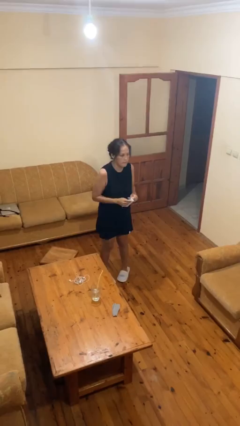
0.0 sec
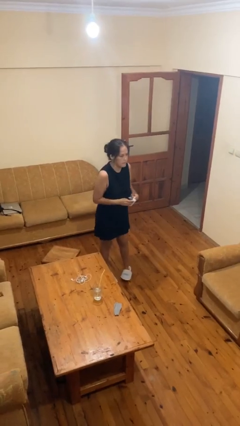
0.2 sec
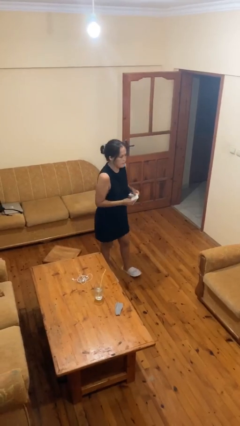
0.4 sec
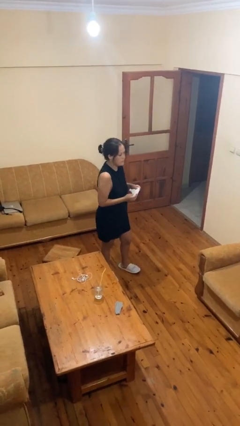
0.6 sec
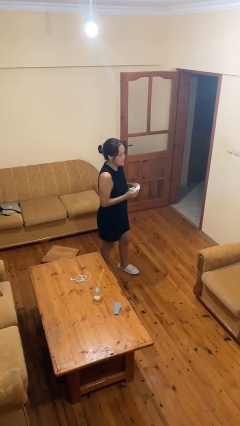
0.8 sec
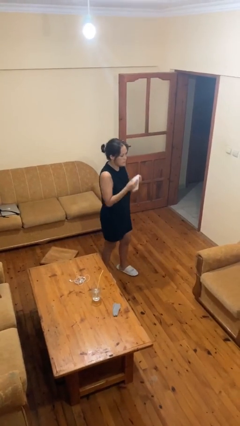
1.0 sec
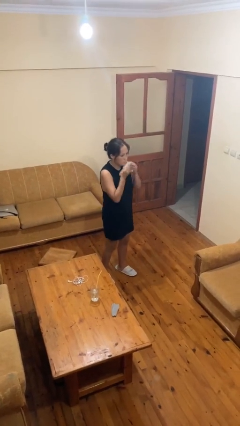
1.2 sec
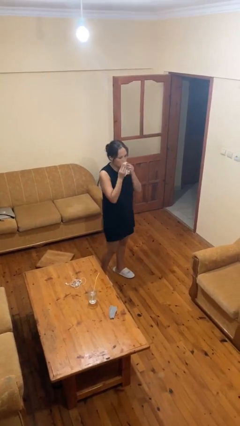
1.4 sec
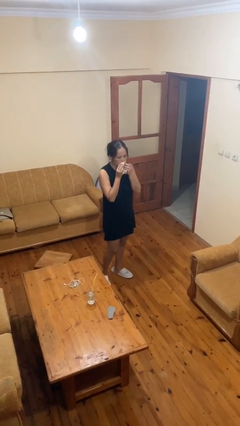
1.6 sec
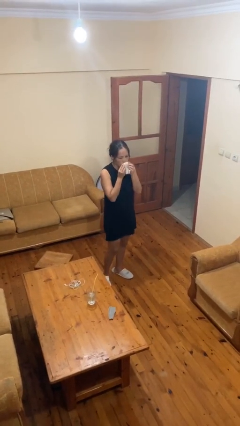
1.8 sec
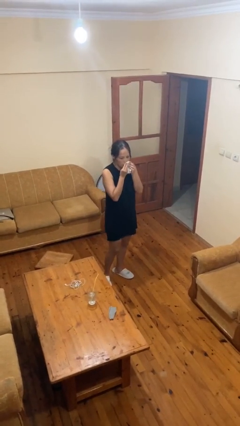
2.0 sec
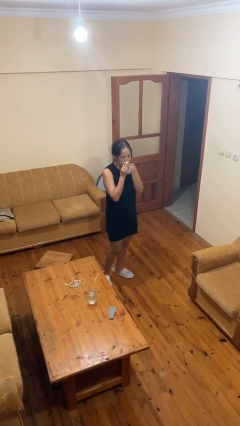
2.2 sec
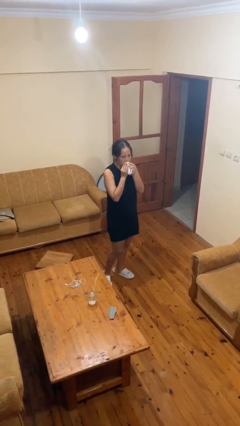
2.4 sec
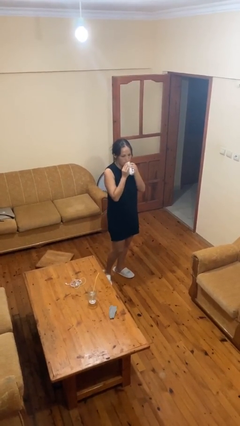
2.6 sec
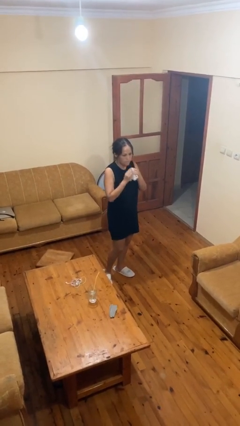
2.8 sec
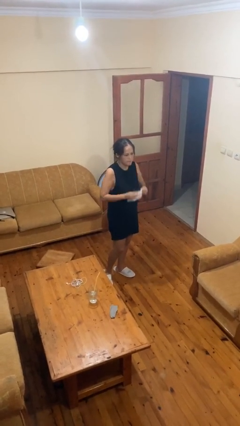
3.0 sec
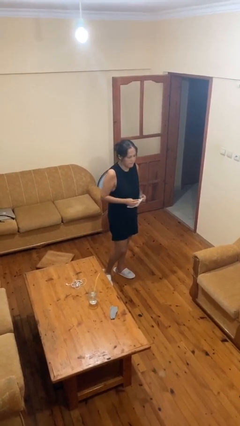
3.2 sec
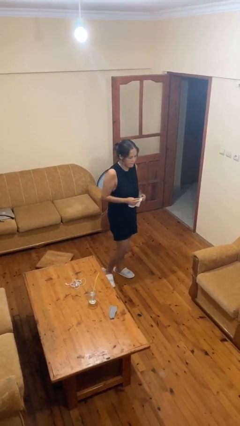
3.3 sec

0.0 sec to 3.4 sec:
person wipes mouth with napkin

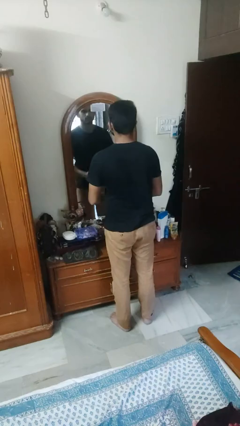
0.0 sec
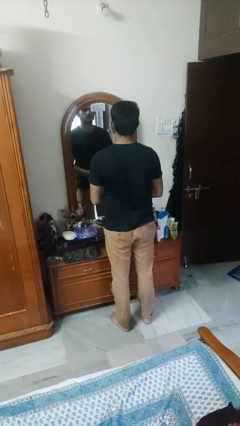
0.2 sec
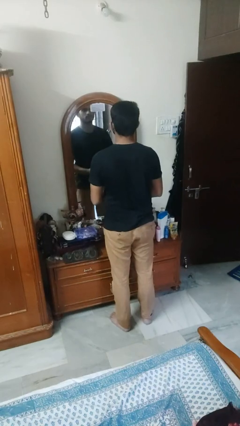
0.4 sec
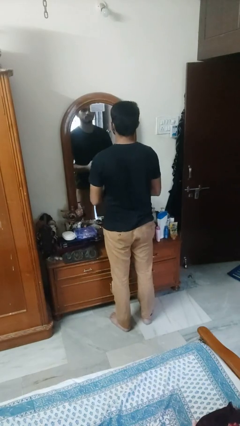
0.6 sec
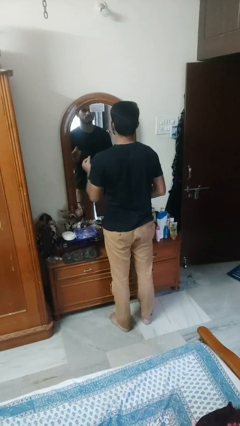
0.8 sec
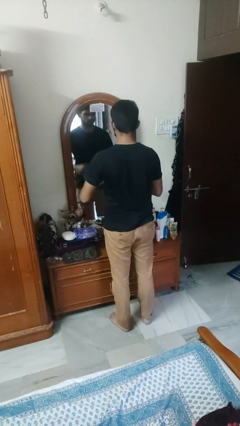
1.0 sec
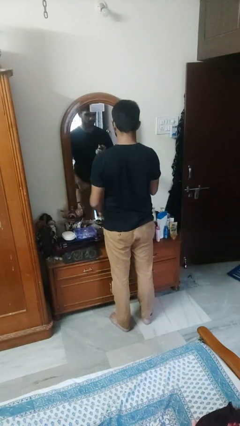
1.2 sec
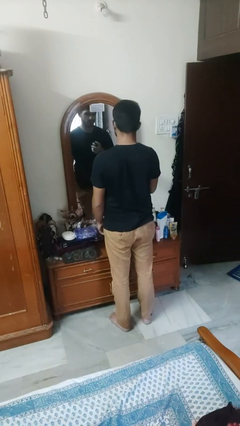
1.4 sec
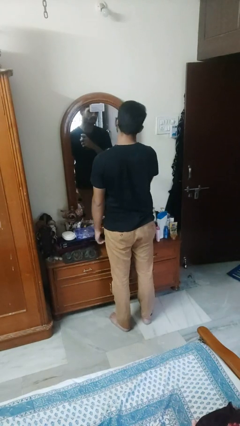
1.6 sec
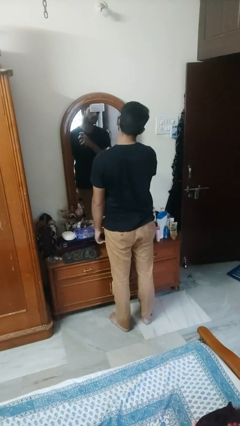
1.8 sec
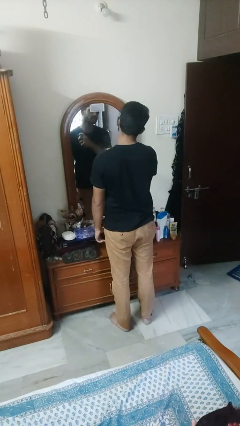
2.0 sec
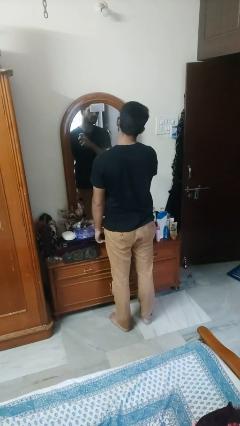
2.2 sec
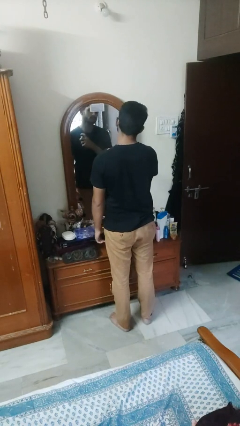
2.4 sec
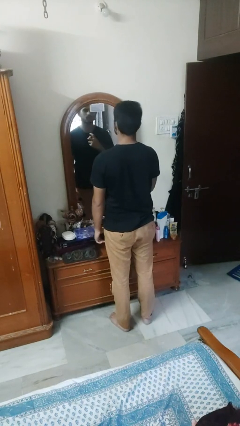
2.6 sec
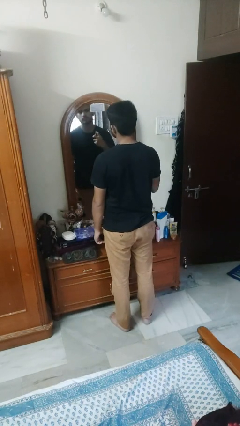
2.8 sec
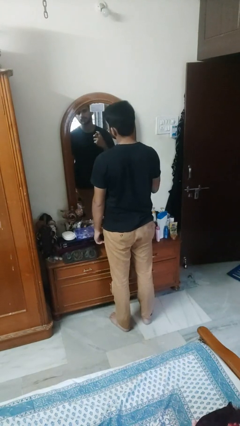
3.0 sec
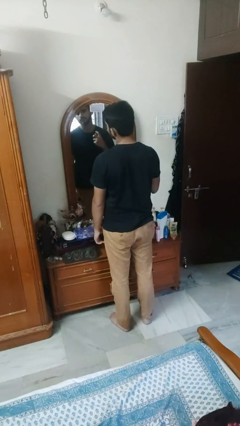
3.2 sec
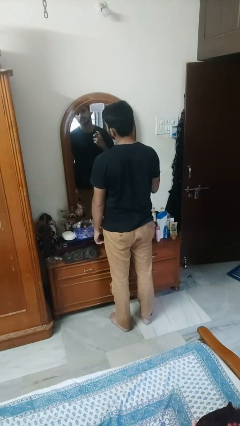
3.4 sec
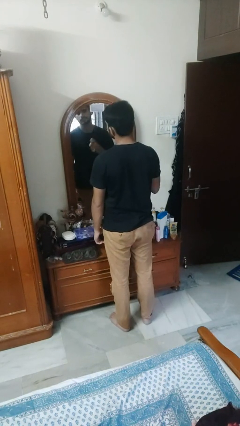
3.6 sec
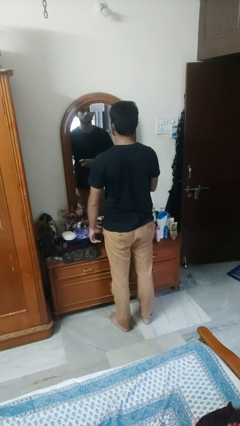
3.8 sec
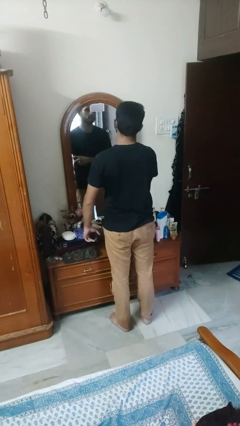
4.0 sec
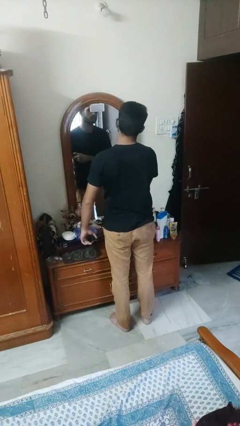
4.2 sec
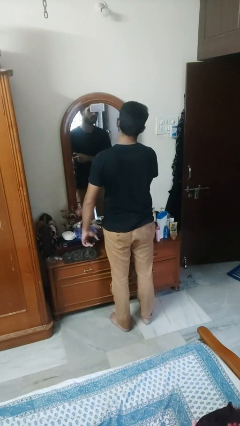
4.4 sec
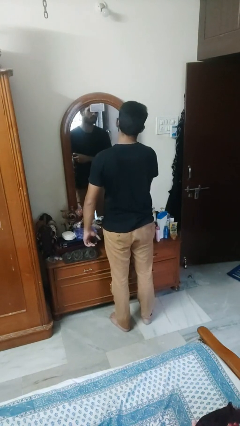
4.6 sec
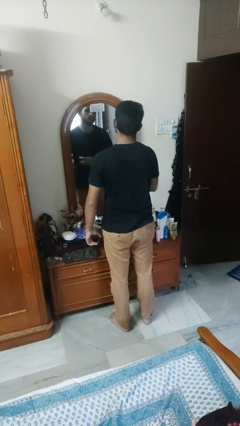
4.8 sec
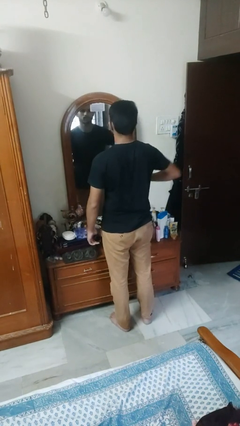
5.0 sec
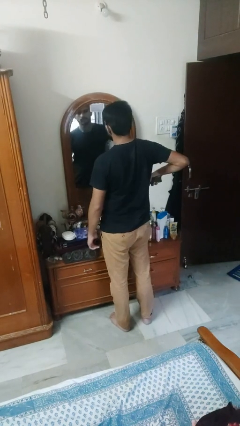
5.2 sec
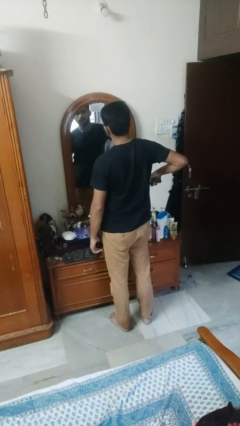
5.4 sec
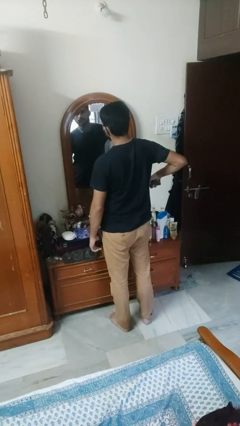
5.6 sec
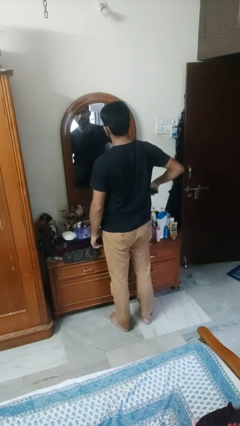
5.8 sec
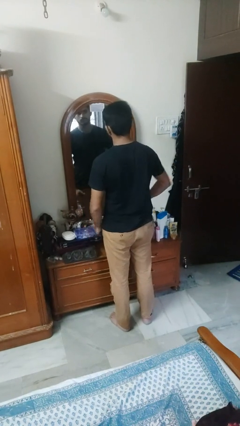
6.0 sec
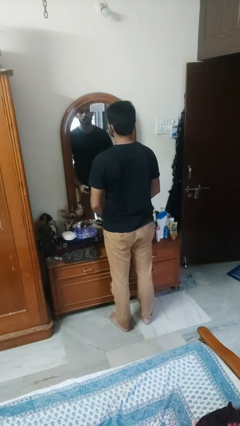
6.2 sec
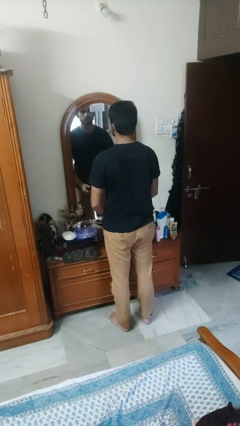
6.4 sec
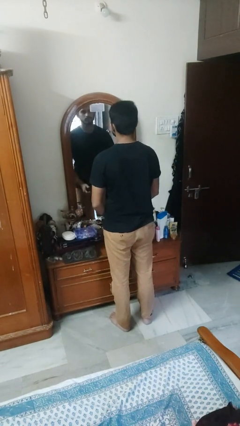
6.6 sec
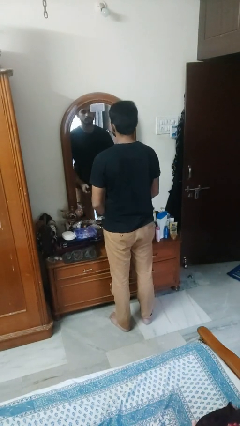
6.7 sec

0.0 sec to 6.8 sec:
person applies deodorant

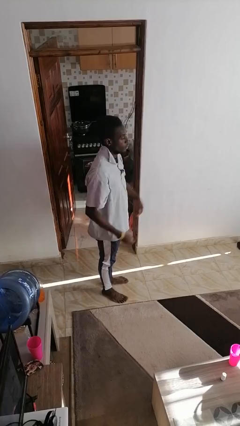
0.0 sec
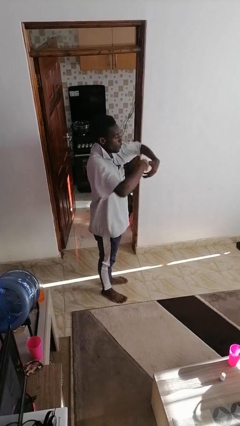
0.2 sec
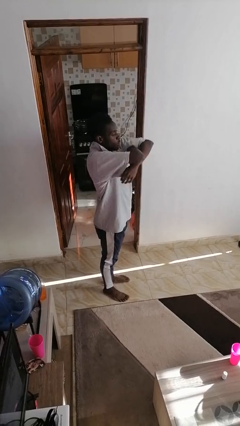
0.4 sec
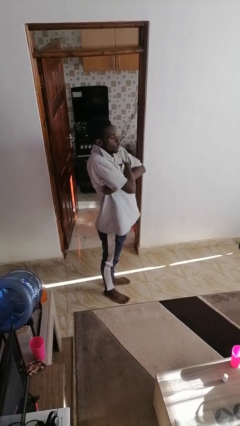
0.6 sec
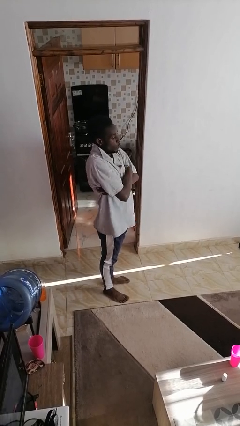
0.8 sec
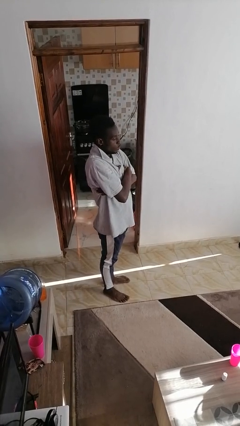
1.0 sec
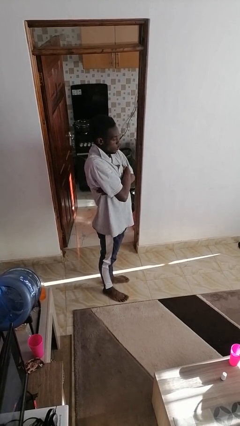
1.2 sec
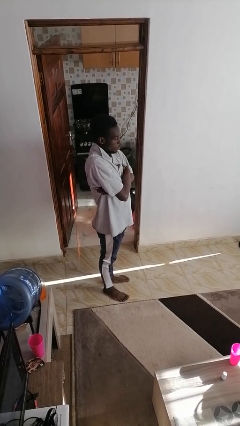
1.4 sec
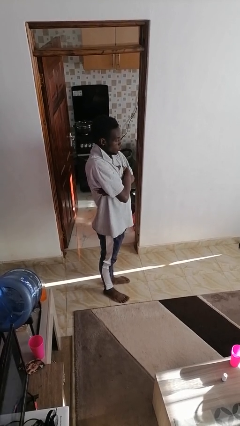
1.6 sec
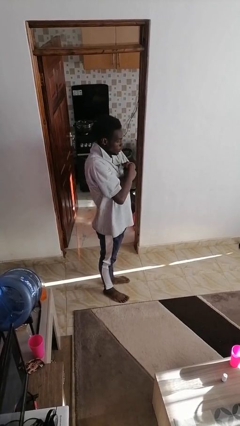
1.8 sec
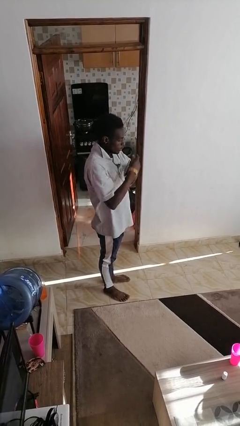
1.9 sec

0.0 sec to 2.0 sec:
person crosses arms

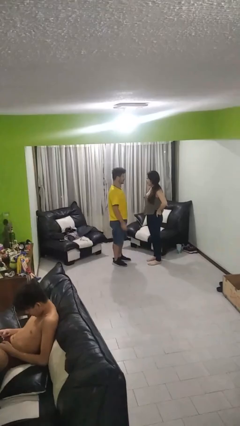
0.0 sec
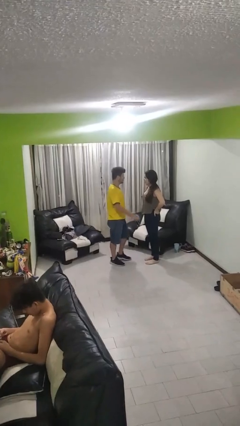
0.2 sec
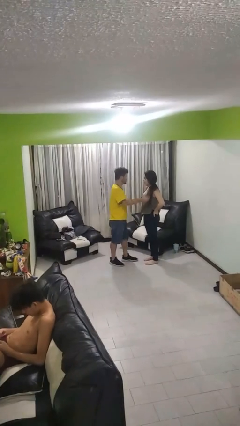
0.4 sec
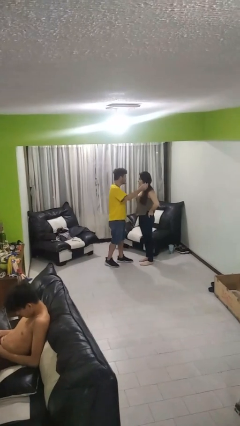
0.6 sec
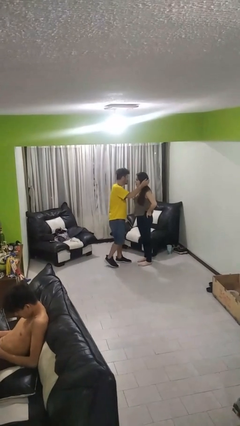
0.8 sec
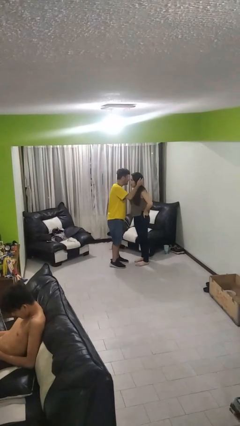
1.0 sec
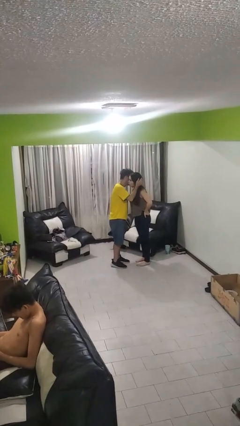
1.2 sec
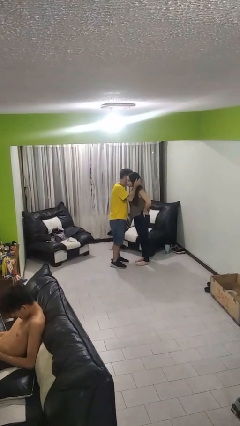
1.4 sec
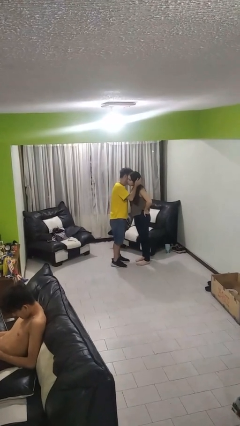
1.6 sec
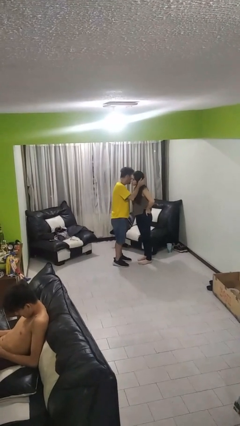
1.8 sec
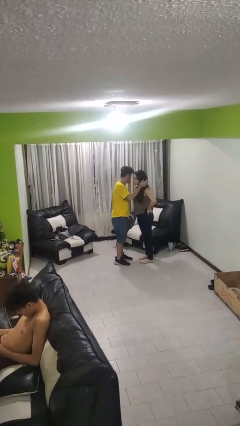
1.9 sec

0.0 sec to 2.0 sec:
person kisses cheek of person

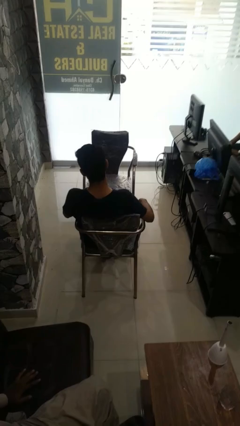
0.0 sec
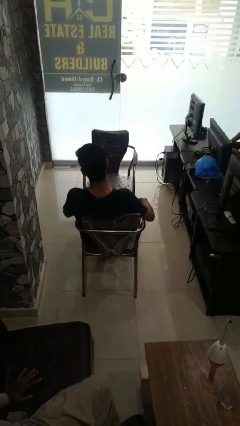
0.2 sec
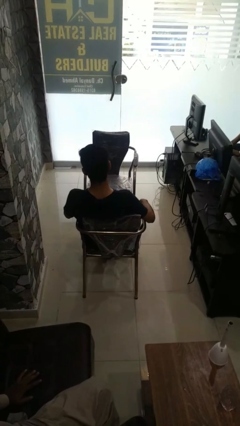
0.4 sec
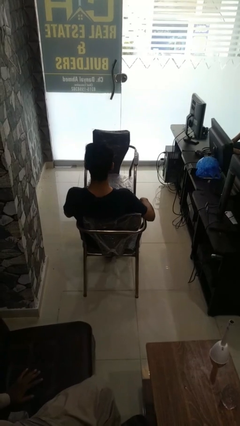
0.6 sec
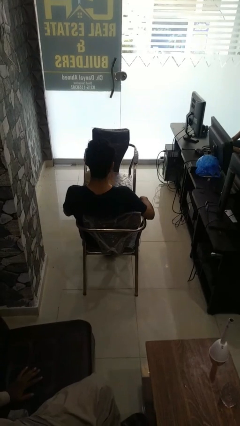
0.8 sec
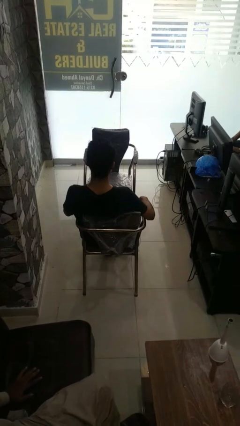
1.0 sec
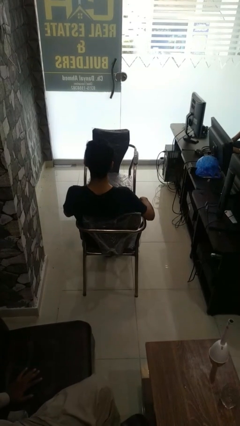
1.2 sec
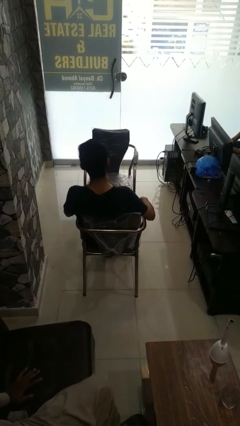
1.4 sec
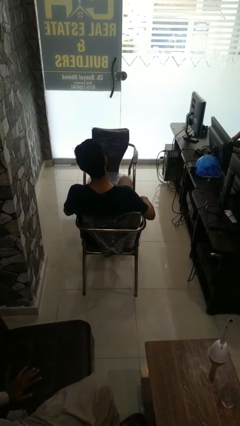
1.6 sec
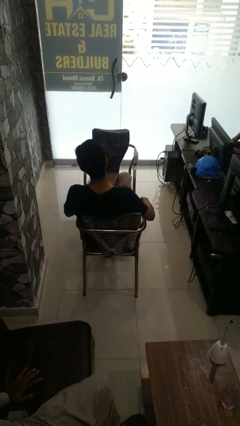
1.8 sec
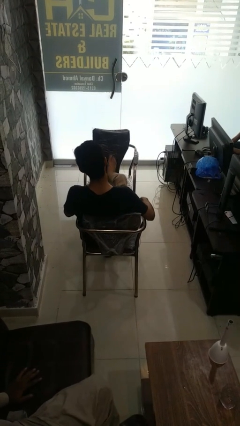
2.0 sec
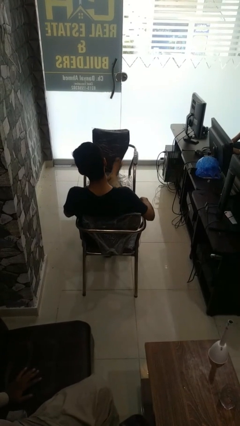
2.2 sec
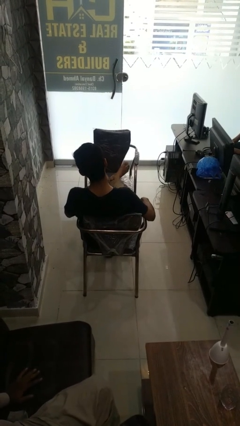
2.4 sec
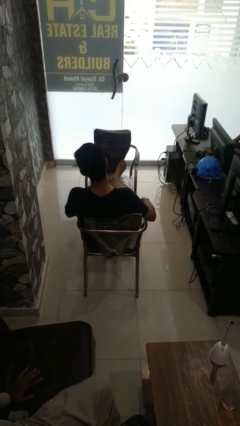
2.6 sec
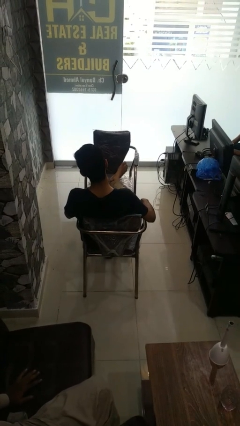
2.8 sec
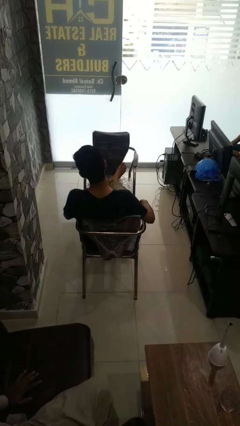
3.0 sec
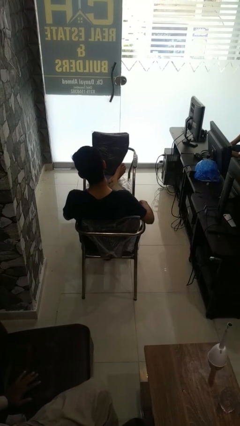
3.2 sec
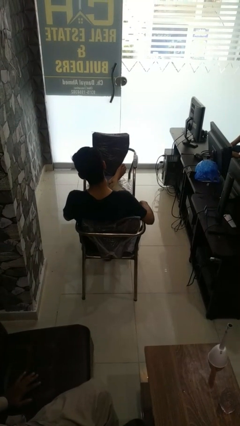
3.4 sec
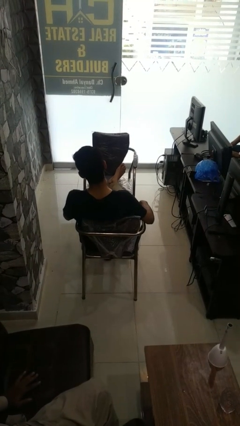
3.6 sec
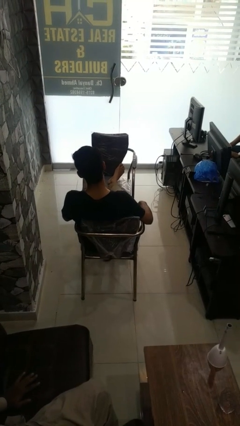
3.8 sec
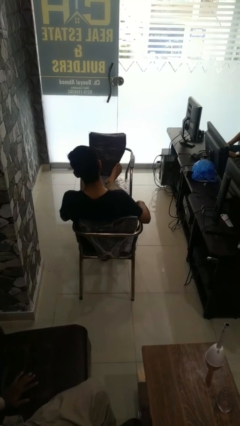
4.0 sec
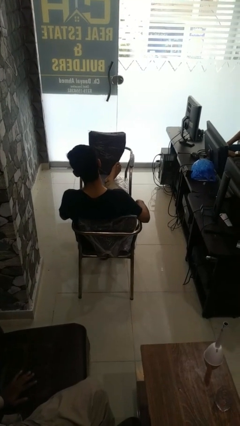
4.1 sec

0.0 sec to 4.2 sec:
person puts feet up
